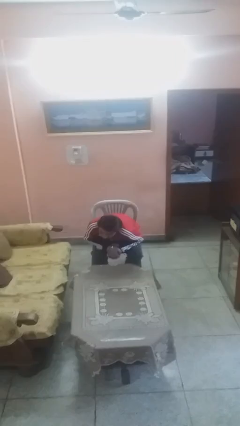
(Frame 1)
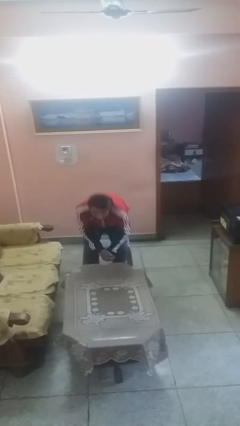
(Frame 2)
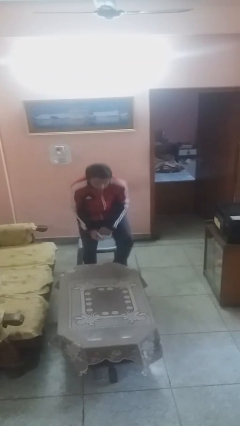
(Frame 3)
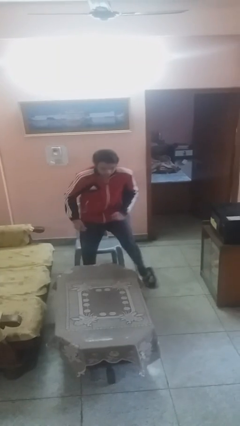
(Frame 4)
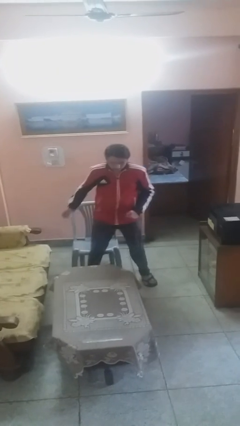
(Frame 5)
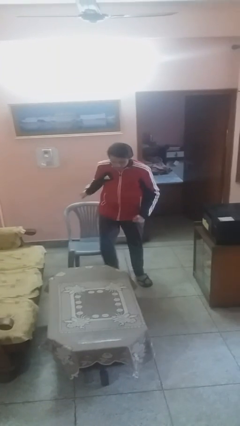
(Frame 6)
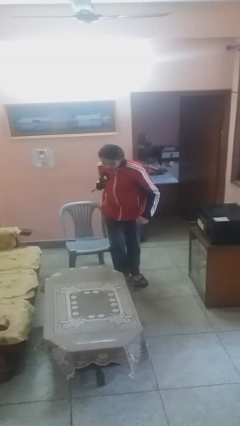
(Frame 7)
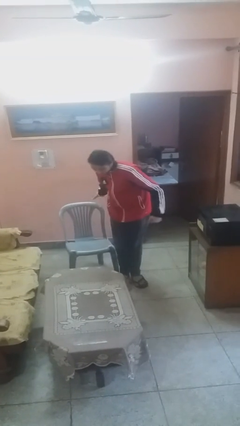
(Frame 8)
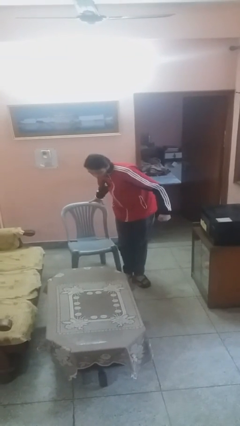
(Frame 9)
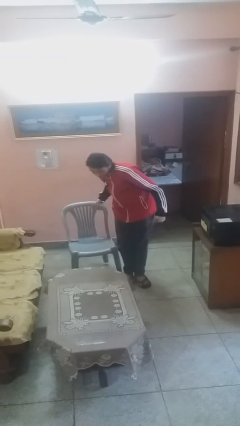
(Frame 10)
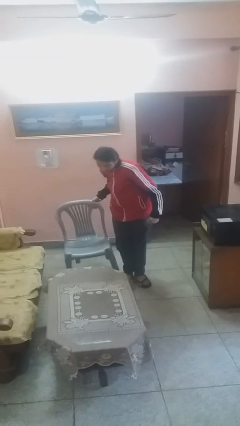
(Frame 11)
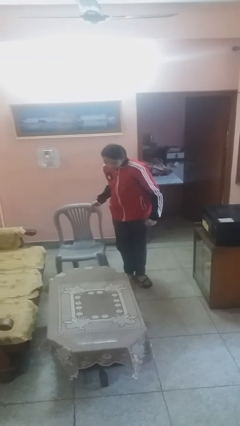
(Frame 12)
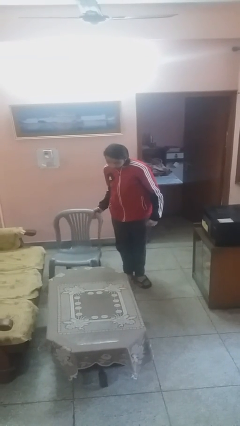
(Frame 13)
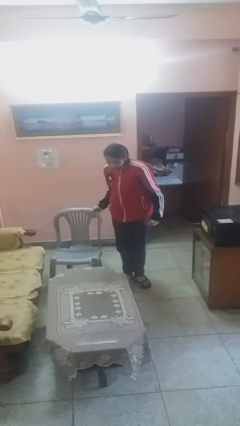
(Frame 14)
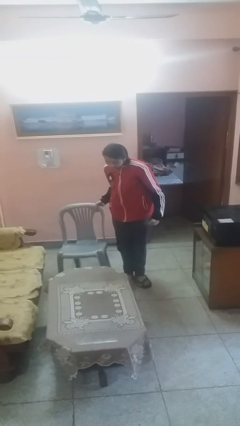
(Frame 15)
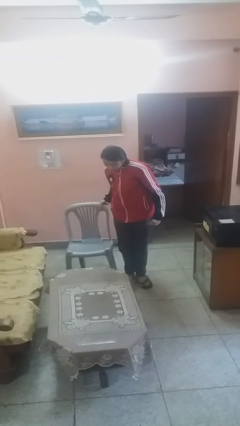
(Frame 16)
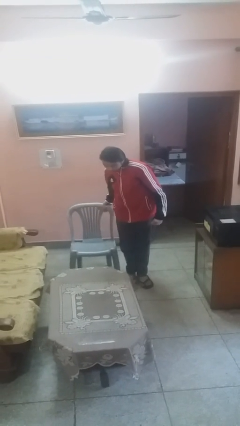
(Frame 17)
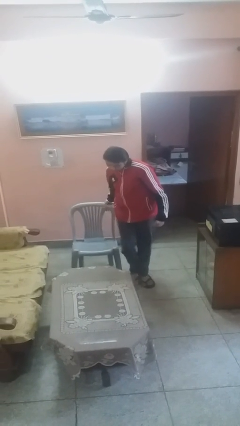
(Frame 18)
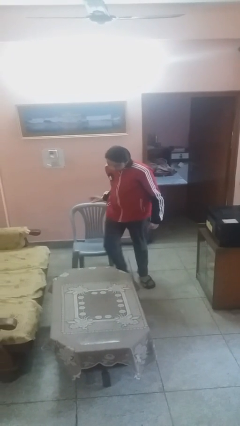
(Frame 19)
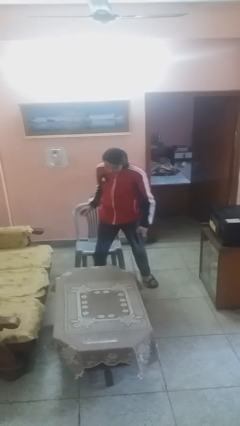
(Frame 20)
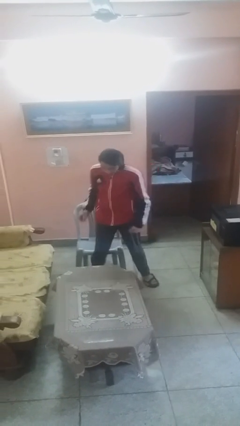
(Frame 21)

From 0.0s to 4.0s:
person stands up

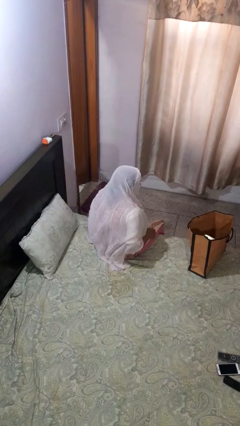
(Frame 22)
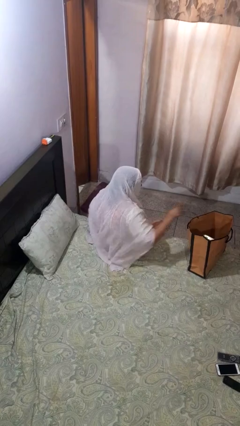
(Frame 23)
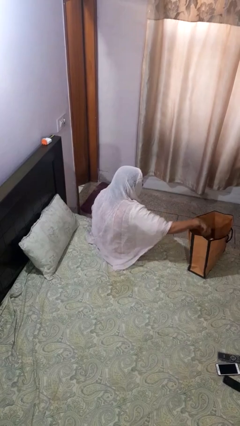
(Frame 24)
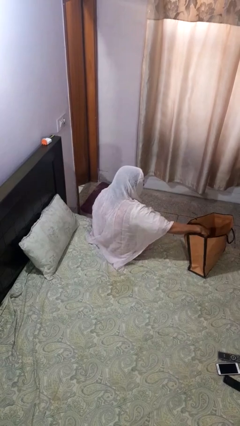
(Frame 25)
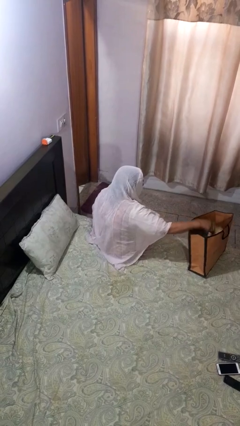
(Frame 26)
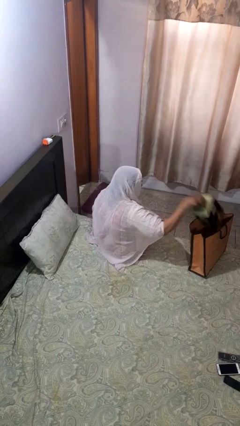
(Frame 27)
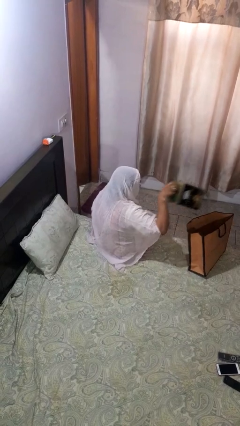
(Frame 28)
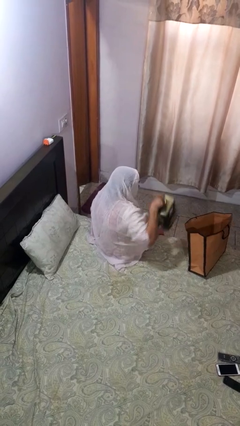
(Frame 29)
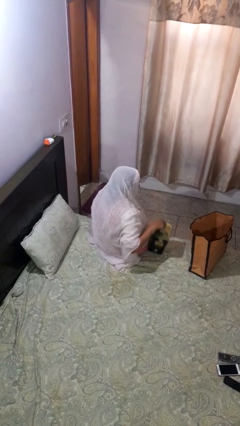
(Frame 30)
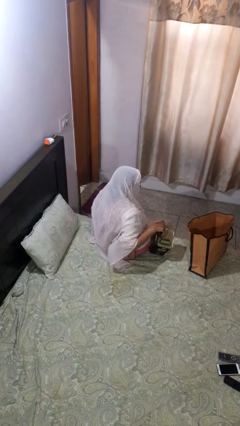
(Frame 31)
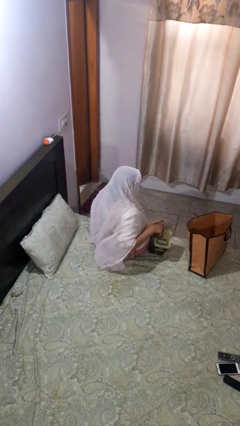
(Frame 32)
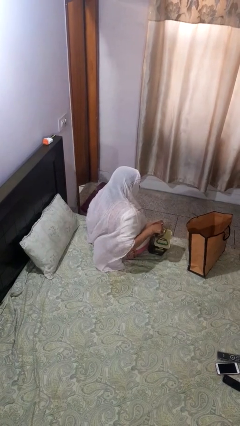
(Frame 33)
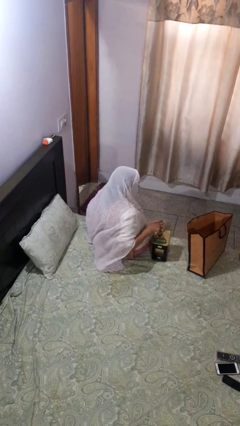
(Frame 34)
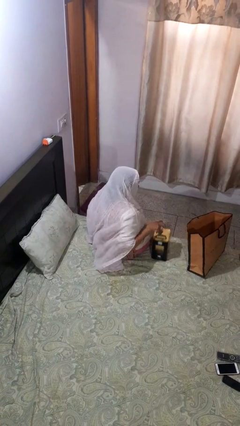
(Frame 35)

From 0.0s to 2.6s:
person takes object from bag

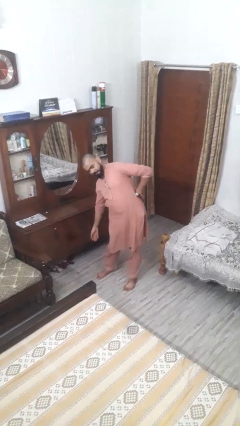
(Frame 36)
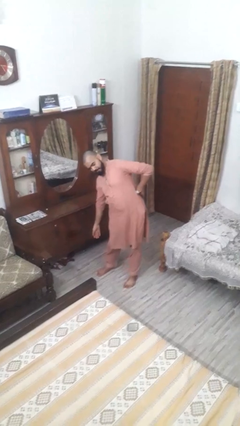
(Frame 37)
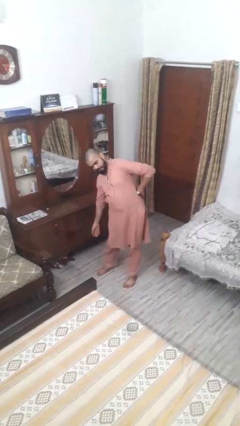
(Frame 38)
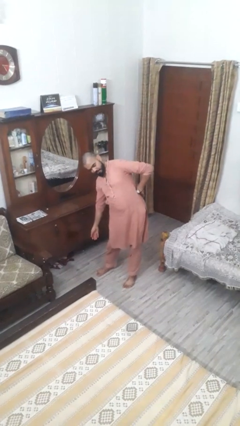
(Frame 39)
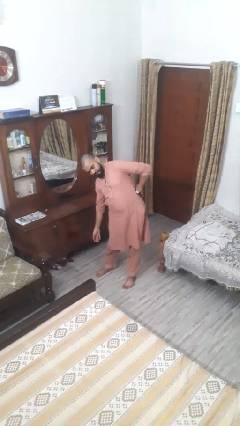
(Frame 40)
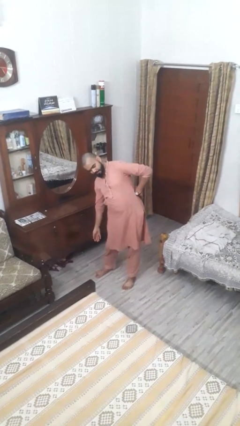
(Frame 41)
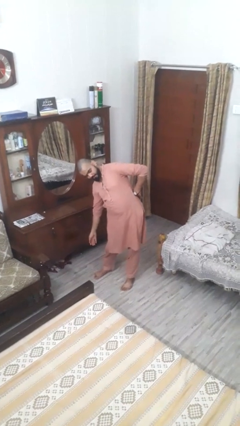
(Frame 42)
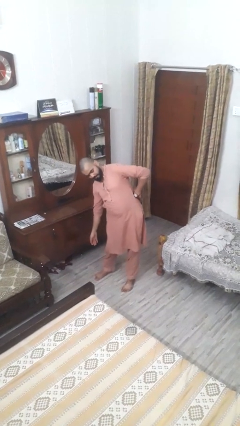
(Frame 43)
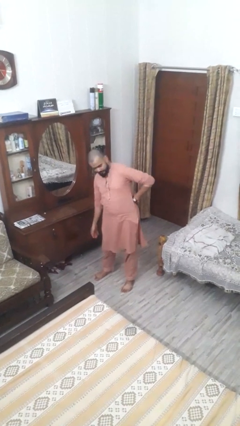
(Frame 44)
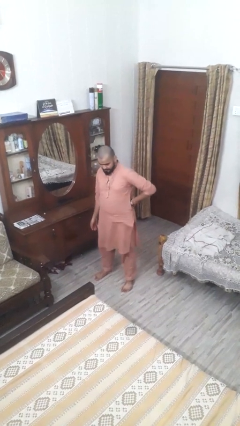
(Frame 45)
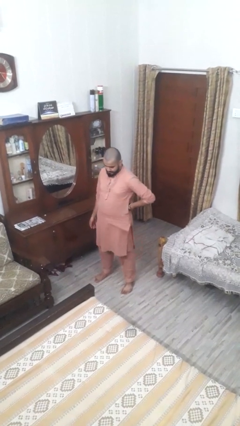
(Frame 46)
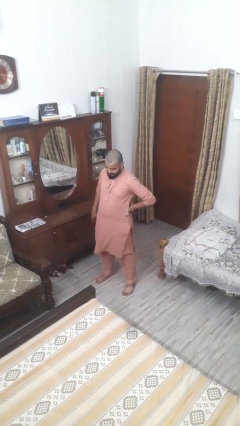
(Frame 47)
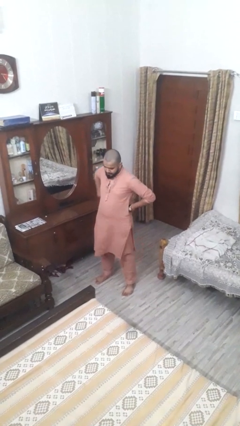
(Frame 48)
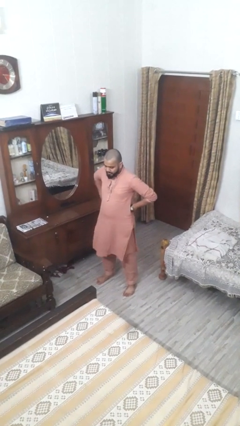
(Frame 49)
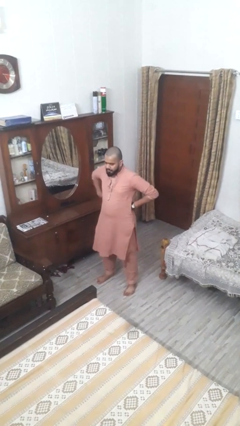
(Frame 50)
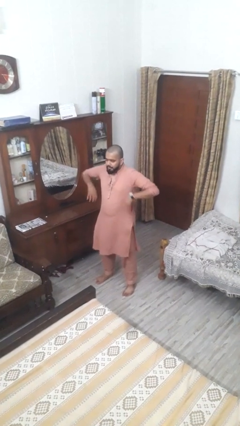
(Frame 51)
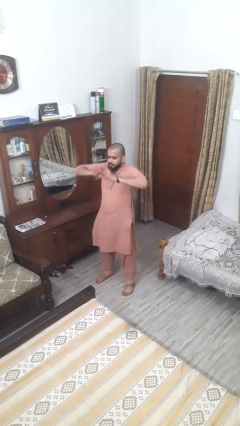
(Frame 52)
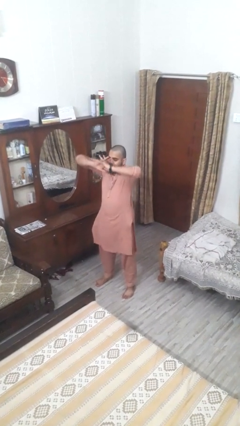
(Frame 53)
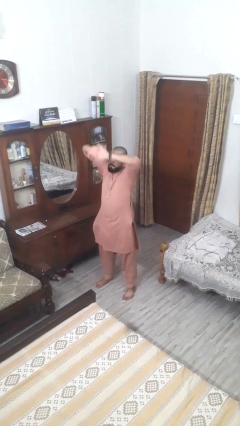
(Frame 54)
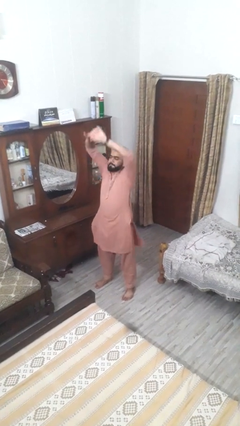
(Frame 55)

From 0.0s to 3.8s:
person stretches arms to side

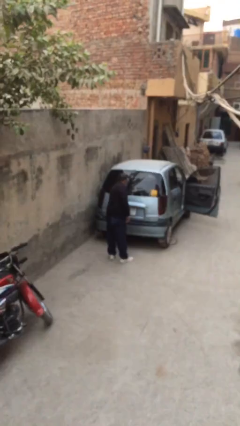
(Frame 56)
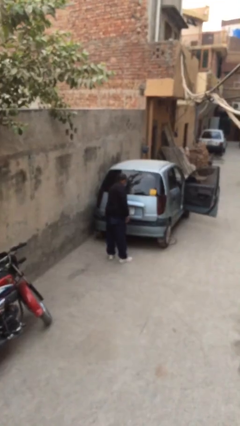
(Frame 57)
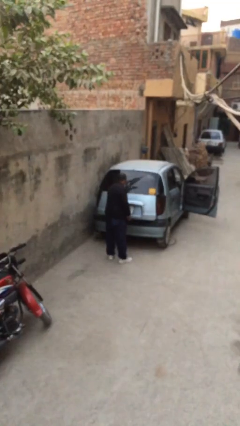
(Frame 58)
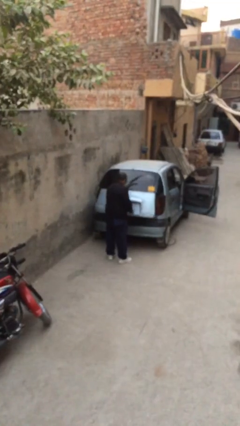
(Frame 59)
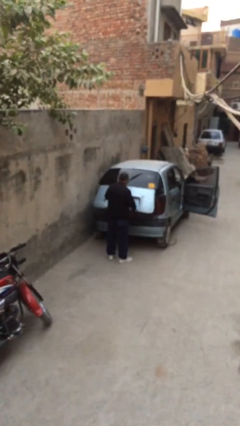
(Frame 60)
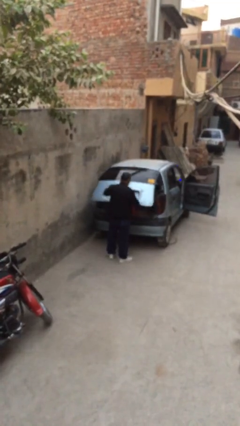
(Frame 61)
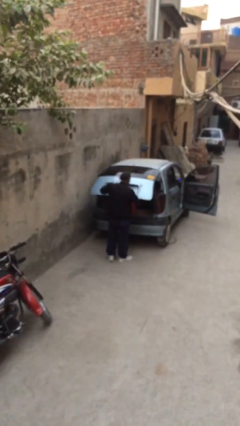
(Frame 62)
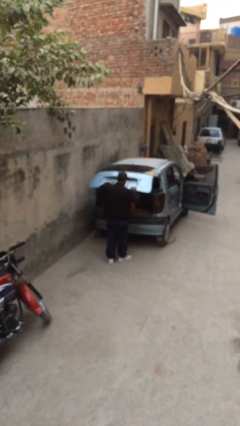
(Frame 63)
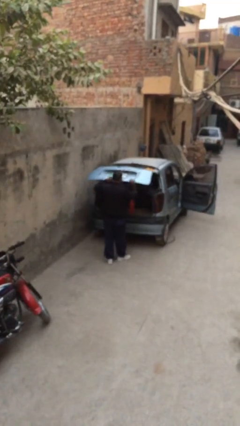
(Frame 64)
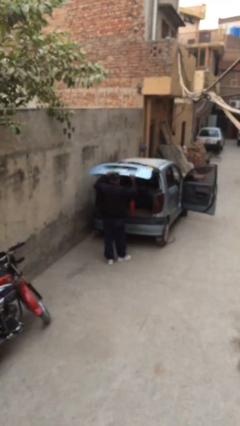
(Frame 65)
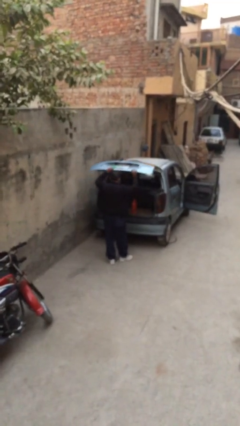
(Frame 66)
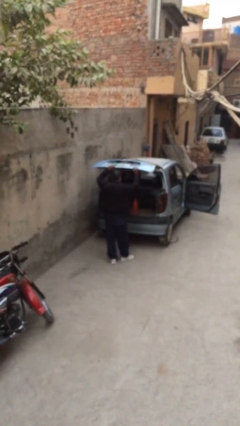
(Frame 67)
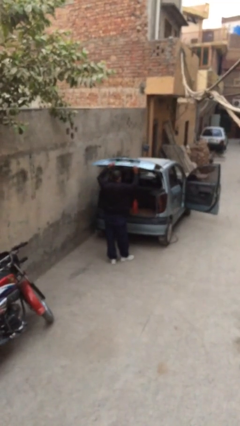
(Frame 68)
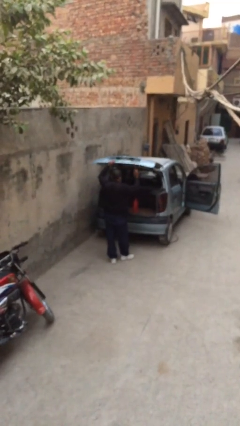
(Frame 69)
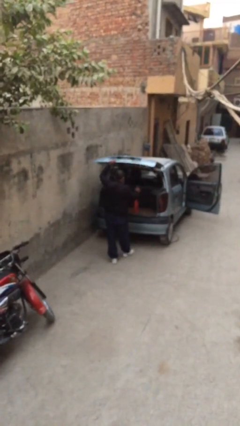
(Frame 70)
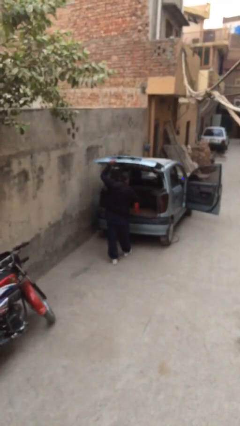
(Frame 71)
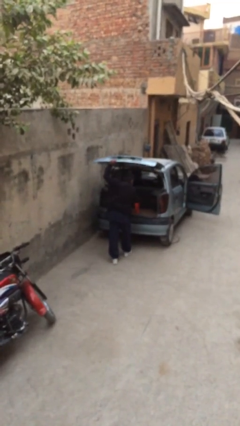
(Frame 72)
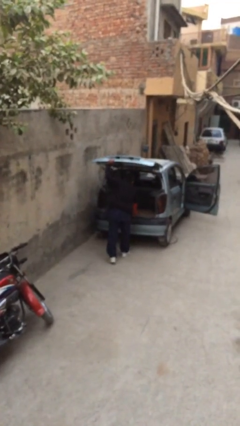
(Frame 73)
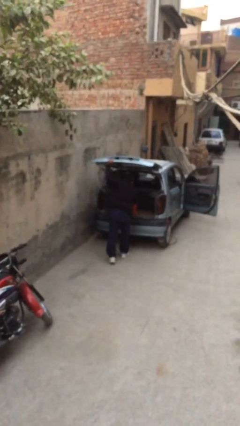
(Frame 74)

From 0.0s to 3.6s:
person opens car trunk

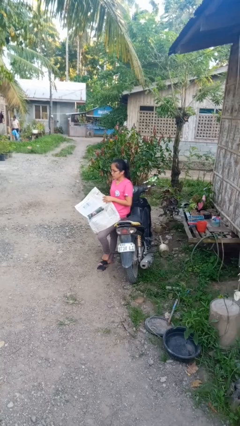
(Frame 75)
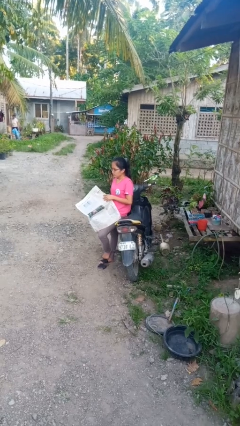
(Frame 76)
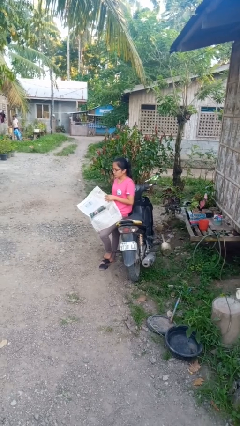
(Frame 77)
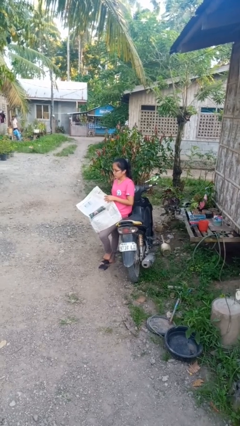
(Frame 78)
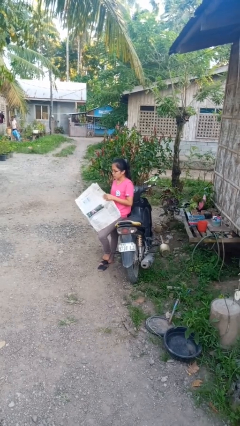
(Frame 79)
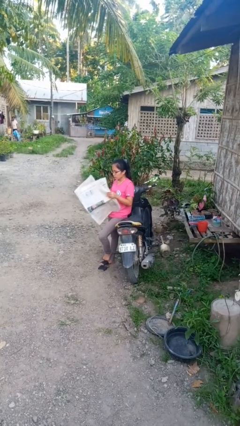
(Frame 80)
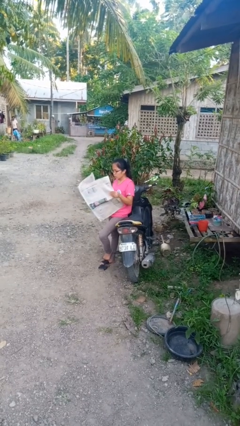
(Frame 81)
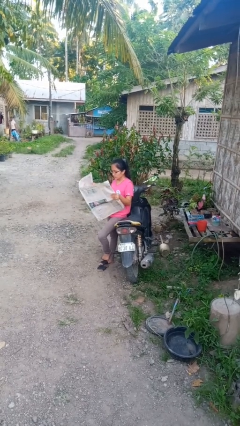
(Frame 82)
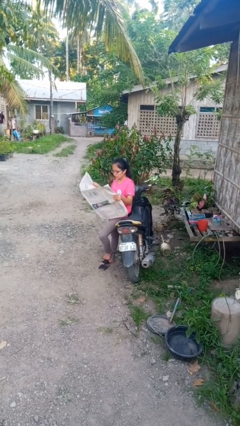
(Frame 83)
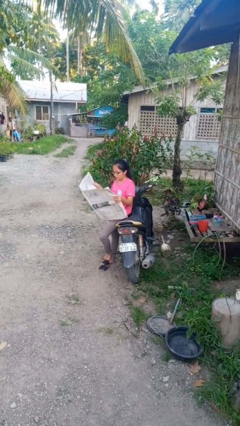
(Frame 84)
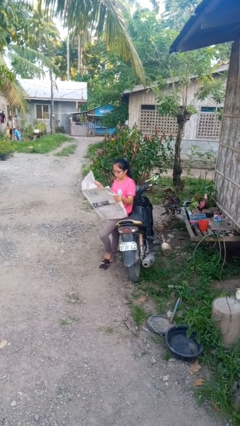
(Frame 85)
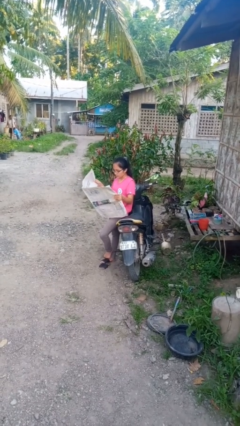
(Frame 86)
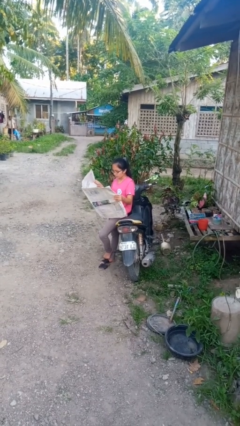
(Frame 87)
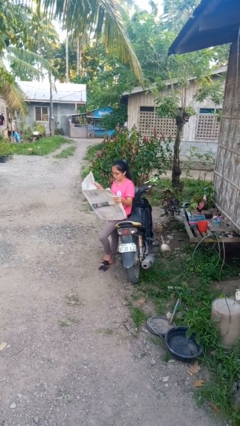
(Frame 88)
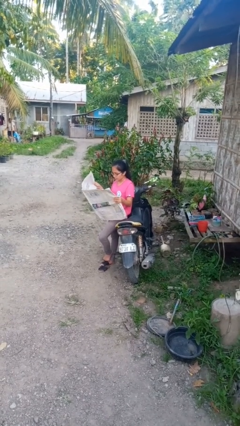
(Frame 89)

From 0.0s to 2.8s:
person reads newspaper

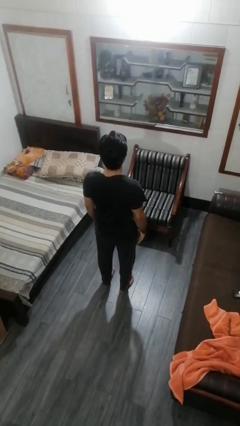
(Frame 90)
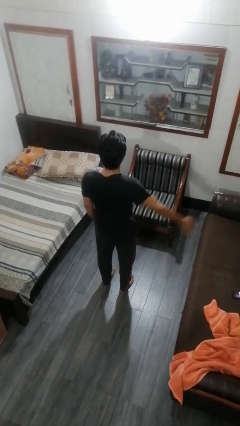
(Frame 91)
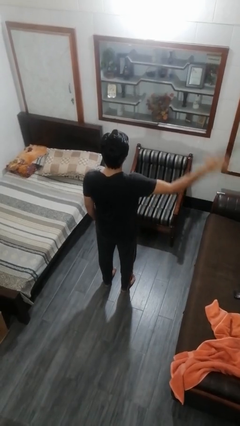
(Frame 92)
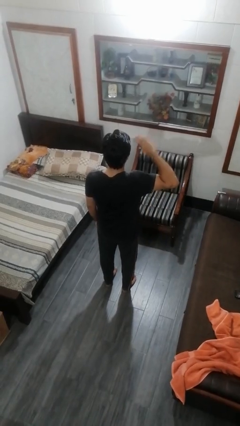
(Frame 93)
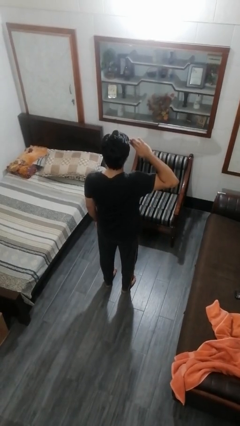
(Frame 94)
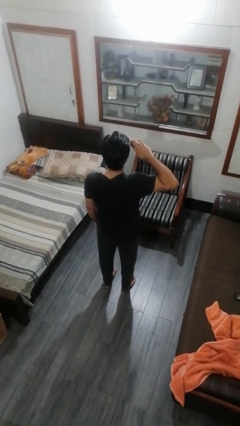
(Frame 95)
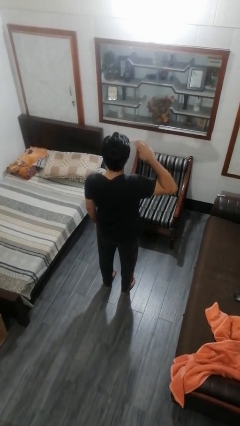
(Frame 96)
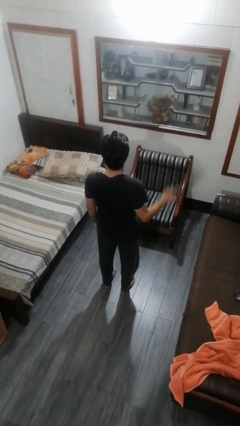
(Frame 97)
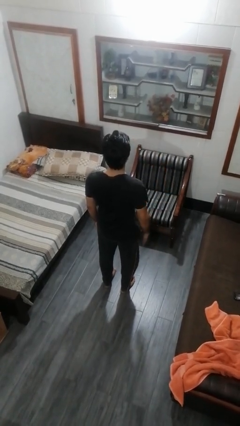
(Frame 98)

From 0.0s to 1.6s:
person salutes
